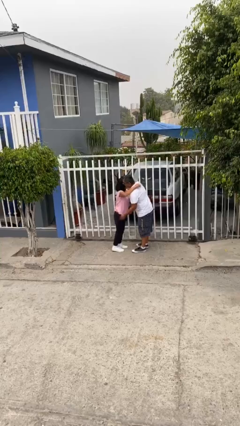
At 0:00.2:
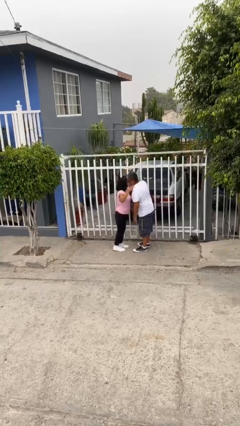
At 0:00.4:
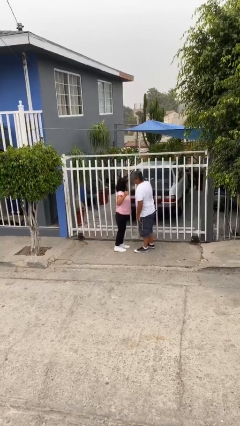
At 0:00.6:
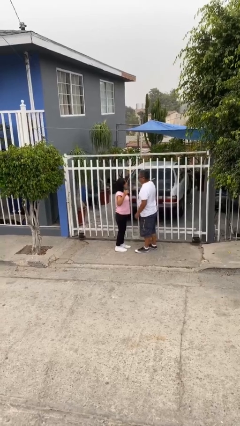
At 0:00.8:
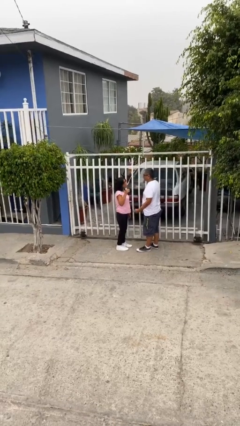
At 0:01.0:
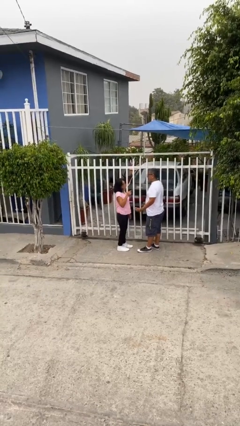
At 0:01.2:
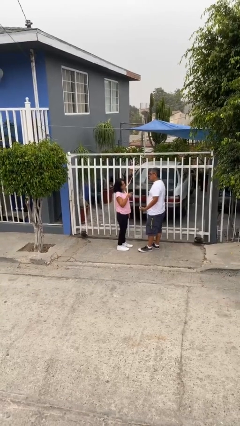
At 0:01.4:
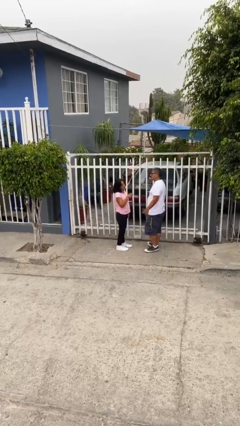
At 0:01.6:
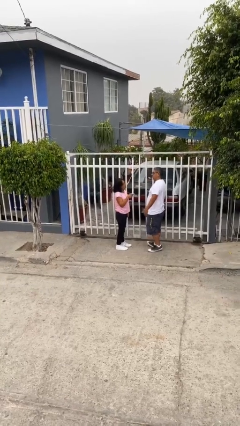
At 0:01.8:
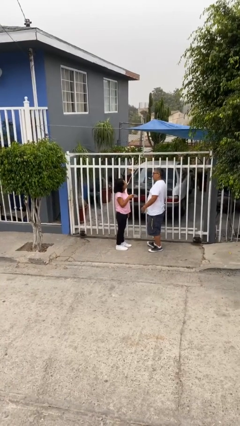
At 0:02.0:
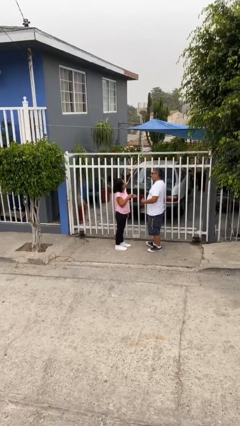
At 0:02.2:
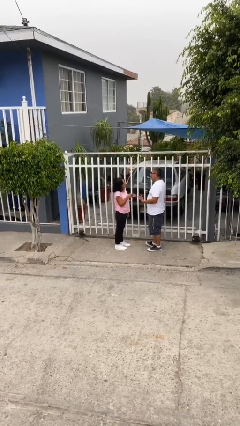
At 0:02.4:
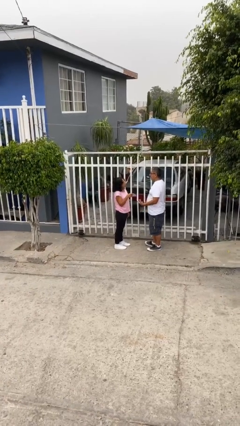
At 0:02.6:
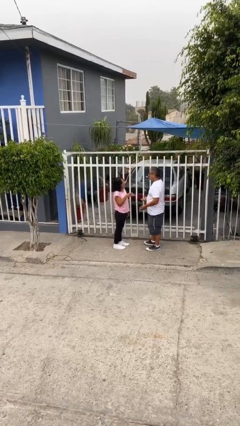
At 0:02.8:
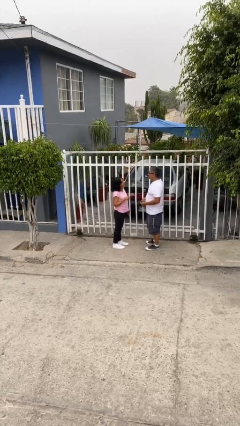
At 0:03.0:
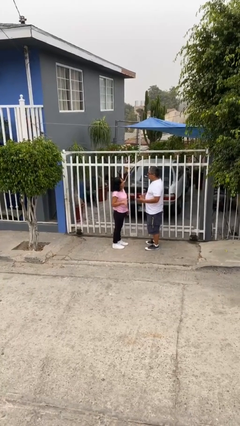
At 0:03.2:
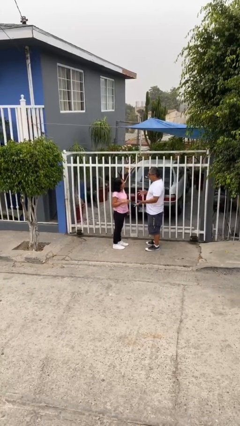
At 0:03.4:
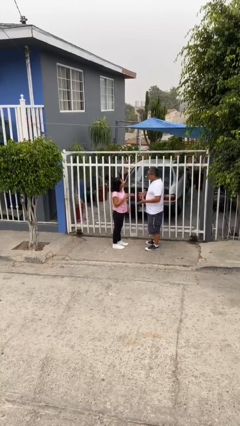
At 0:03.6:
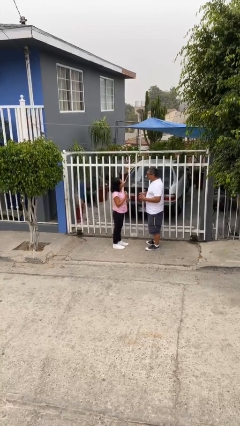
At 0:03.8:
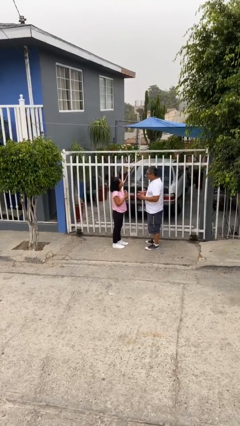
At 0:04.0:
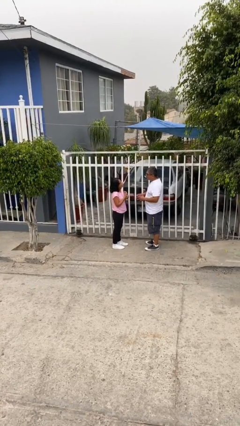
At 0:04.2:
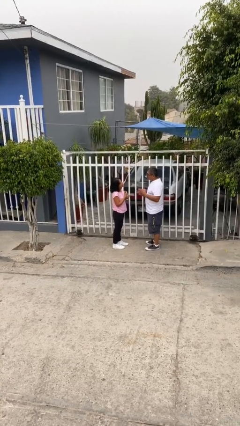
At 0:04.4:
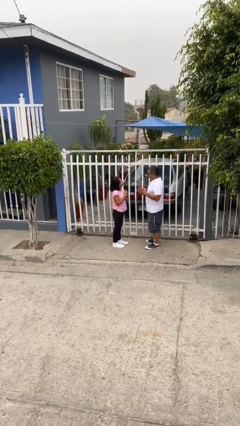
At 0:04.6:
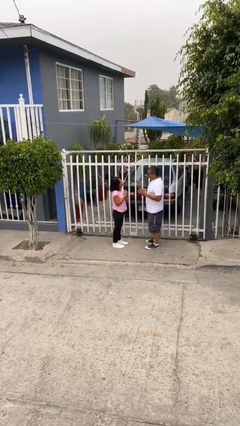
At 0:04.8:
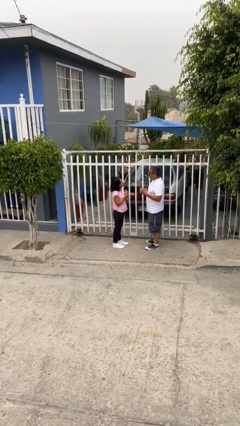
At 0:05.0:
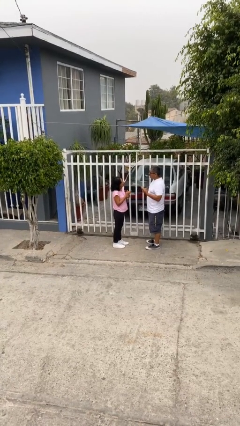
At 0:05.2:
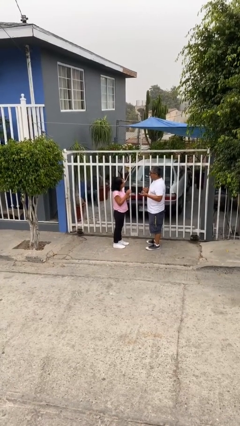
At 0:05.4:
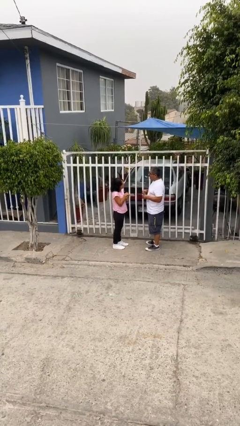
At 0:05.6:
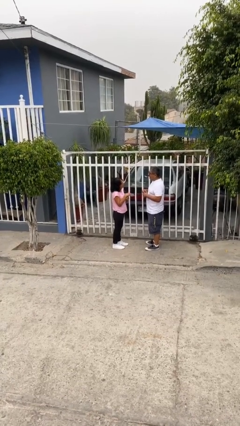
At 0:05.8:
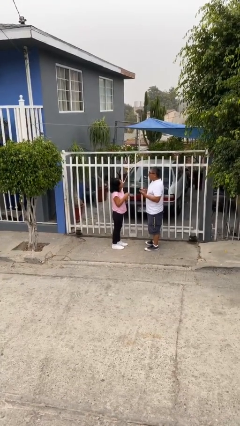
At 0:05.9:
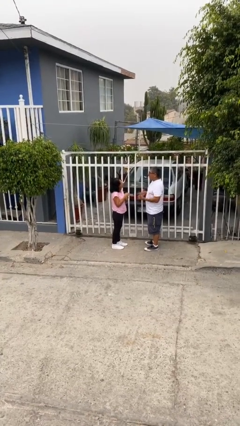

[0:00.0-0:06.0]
person talks to person

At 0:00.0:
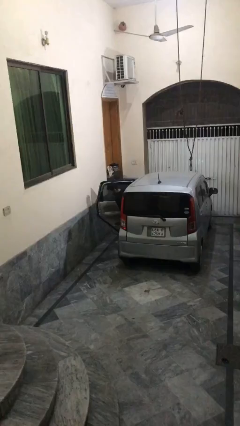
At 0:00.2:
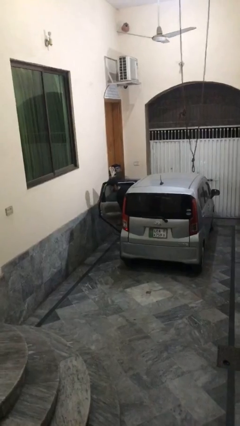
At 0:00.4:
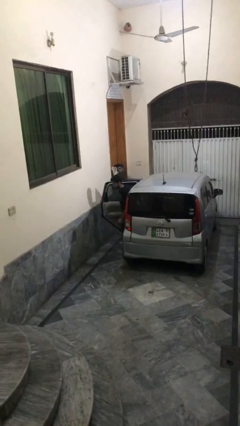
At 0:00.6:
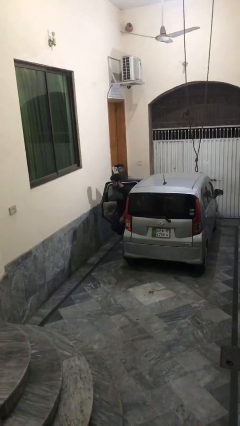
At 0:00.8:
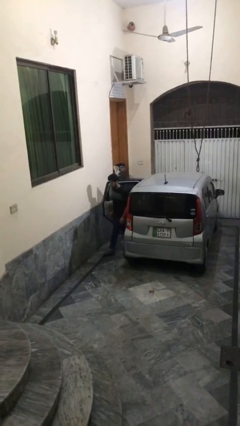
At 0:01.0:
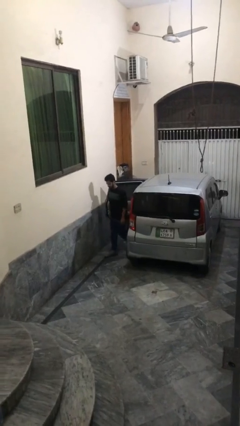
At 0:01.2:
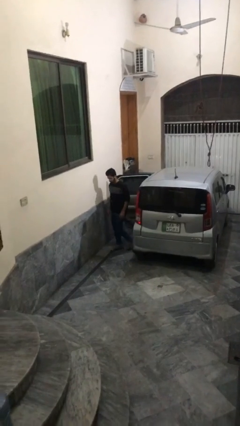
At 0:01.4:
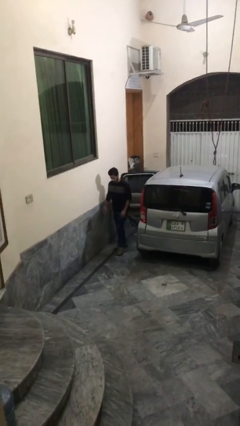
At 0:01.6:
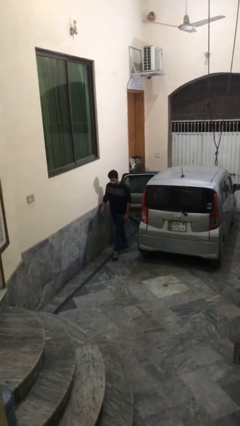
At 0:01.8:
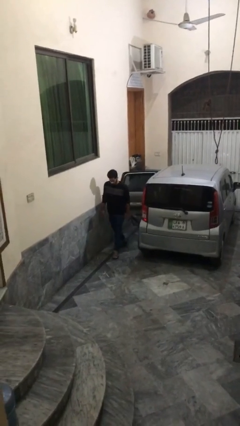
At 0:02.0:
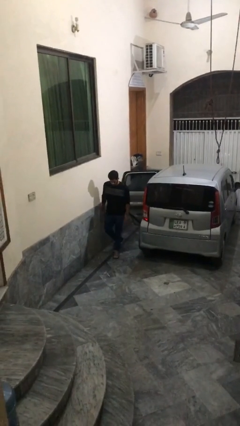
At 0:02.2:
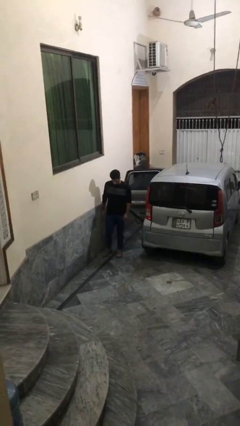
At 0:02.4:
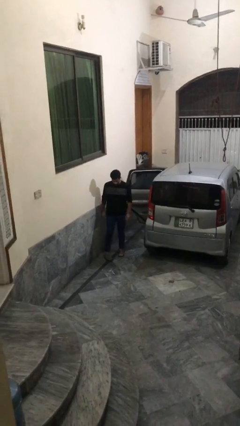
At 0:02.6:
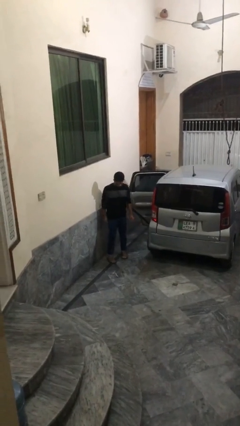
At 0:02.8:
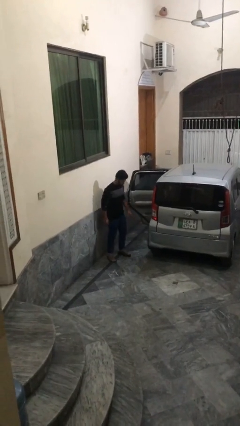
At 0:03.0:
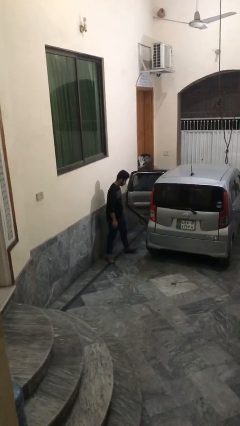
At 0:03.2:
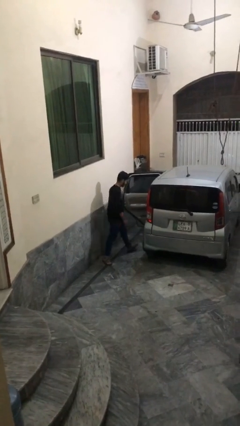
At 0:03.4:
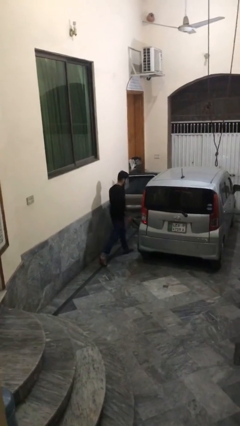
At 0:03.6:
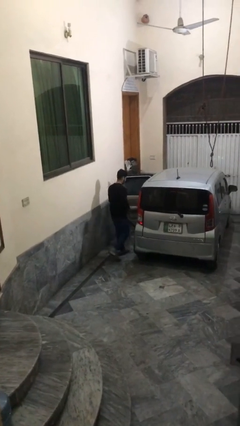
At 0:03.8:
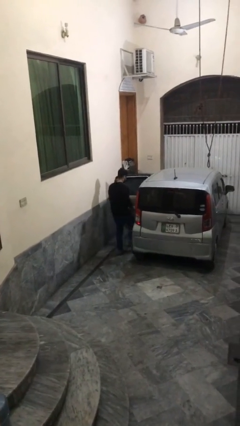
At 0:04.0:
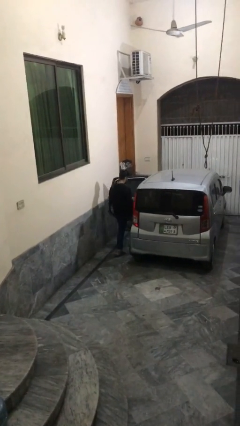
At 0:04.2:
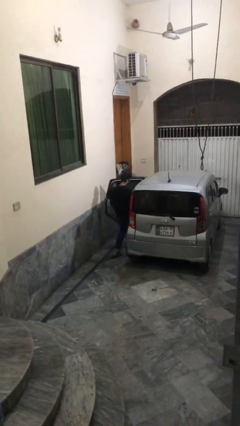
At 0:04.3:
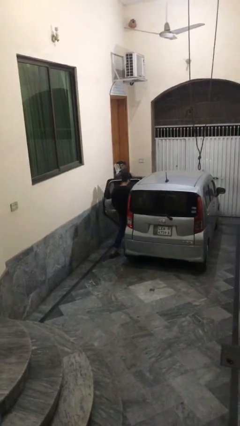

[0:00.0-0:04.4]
person exits car

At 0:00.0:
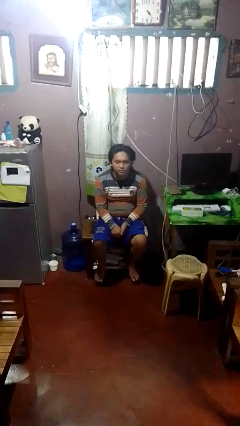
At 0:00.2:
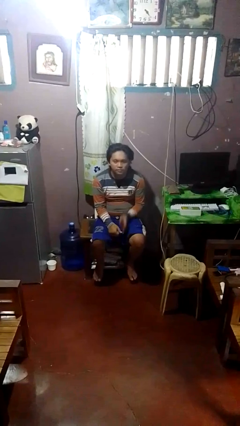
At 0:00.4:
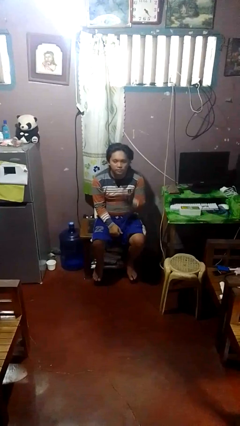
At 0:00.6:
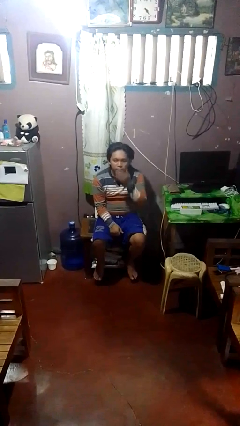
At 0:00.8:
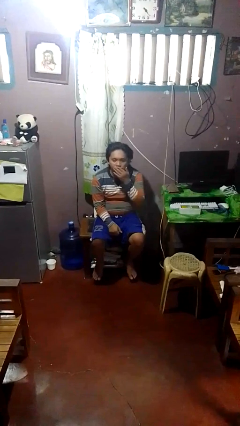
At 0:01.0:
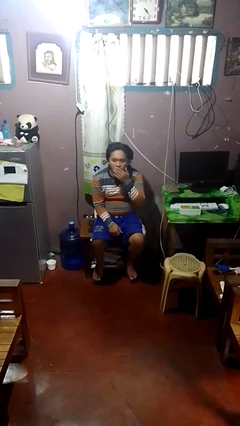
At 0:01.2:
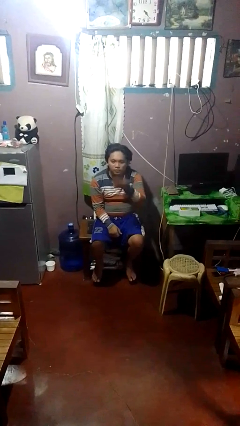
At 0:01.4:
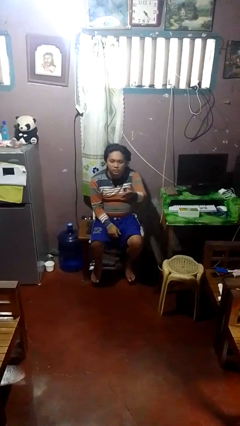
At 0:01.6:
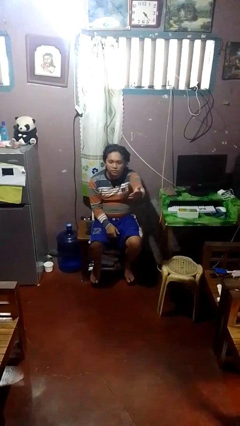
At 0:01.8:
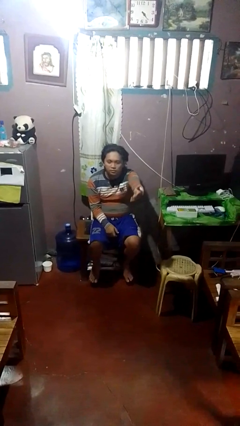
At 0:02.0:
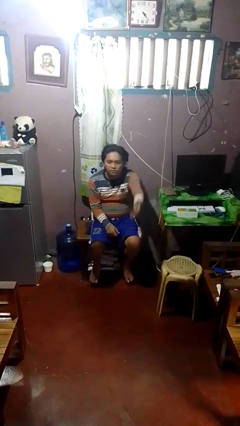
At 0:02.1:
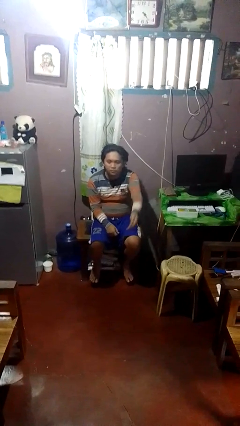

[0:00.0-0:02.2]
person gestures blow kiss

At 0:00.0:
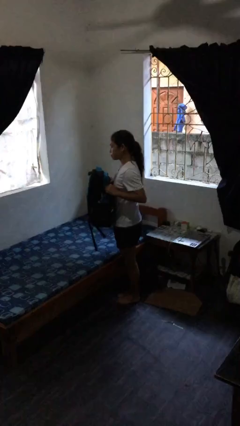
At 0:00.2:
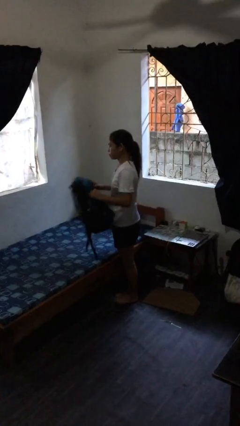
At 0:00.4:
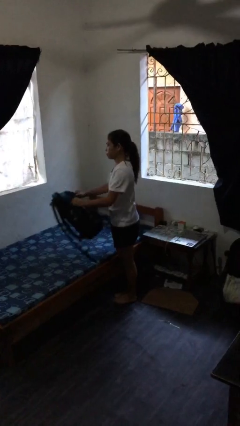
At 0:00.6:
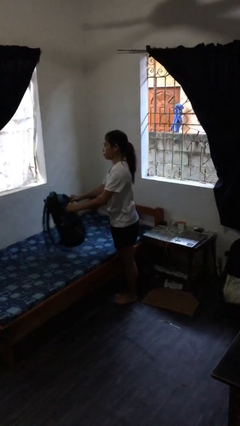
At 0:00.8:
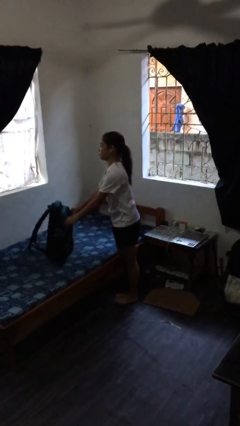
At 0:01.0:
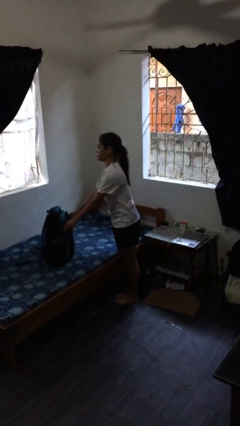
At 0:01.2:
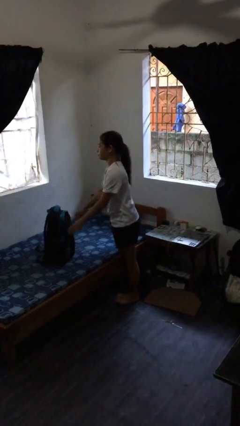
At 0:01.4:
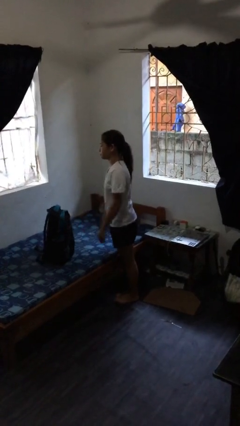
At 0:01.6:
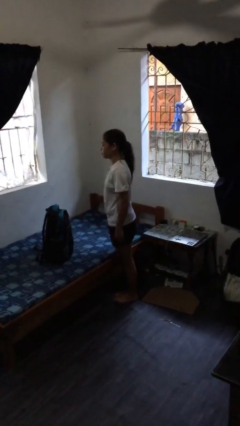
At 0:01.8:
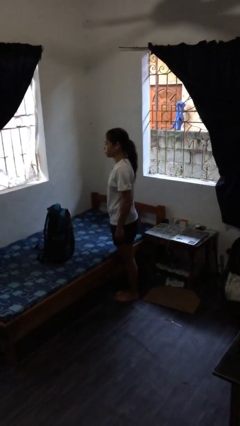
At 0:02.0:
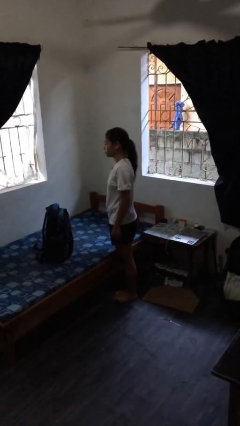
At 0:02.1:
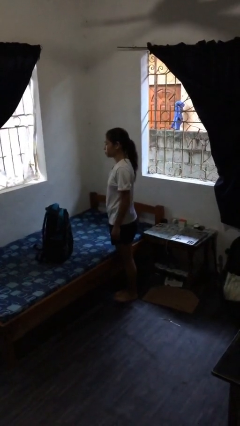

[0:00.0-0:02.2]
person puts down object on bed

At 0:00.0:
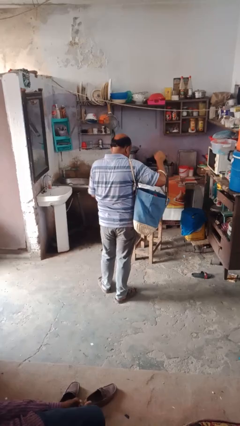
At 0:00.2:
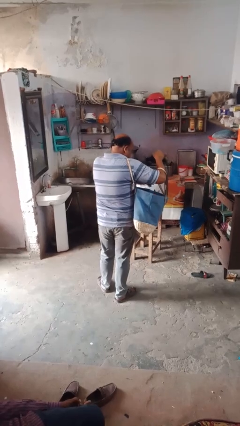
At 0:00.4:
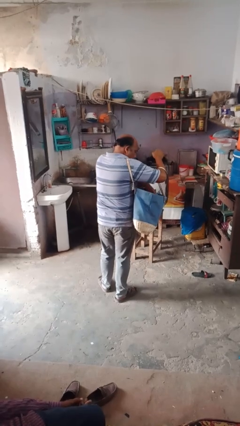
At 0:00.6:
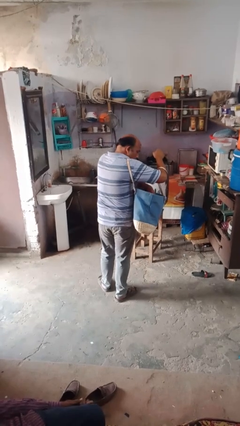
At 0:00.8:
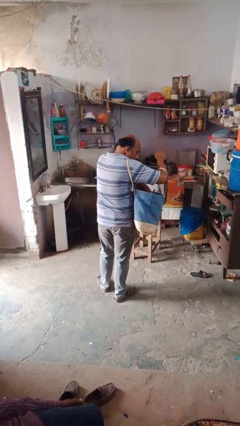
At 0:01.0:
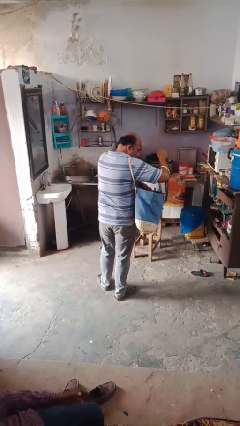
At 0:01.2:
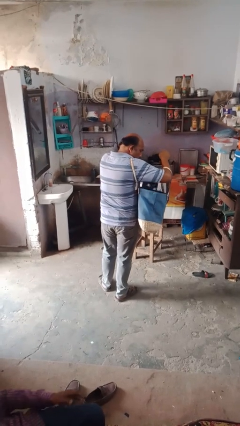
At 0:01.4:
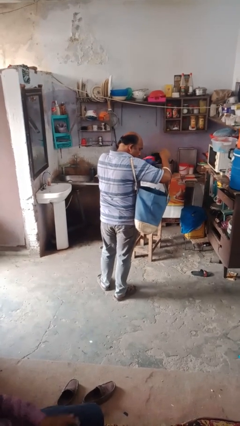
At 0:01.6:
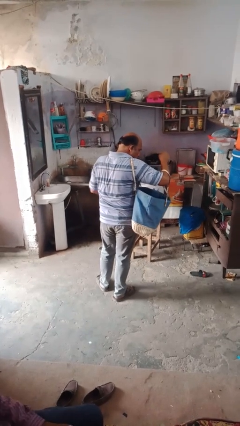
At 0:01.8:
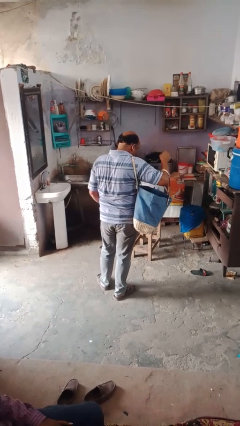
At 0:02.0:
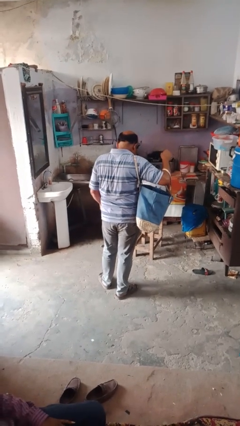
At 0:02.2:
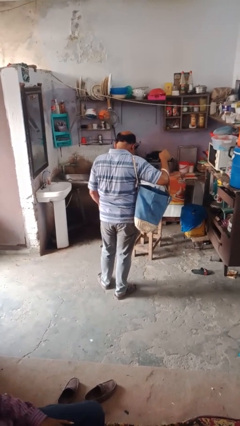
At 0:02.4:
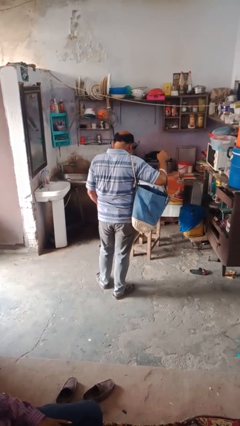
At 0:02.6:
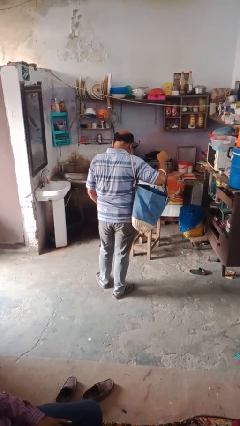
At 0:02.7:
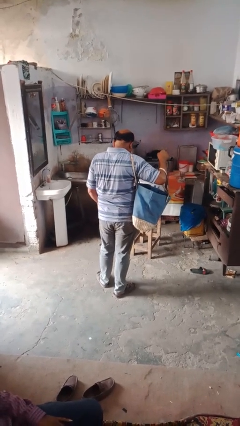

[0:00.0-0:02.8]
person takes object from bag
